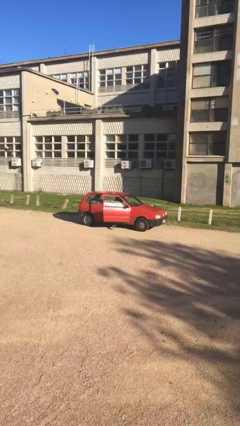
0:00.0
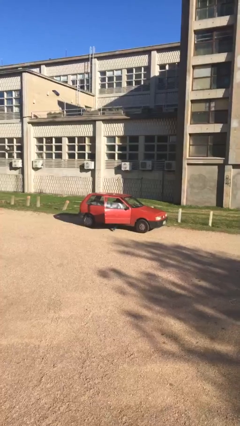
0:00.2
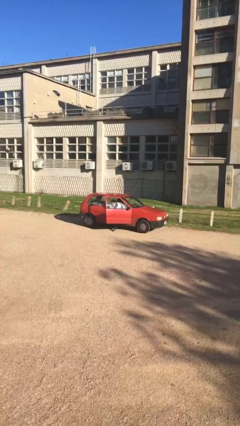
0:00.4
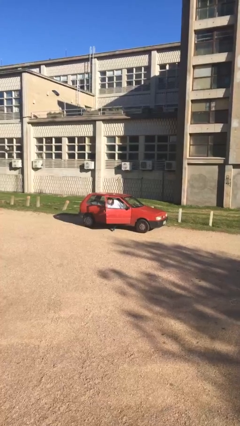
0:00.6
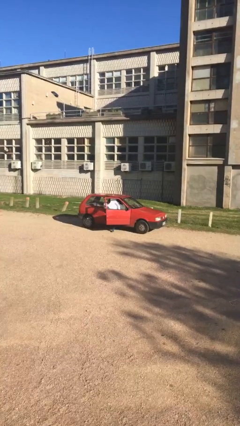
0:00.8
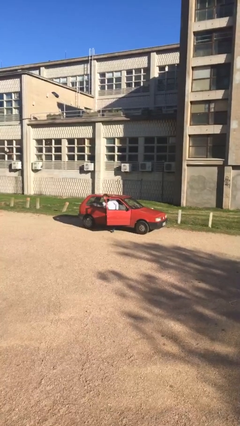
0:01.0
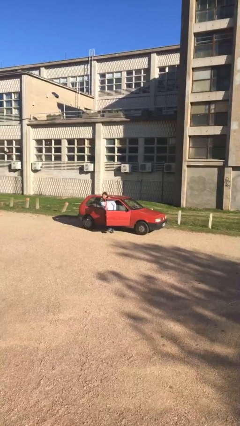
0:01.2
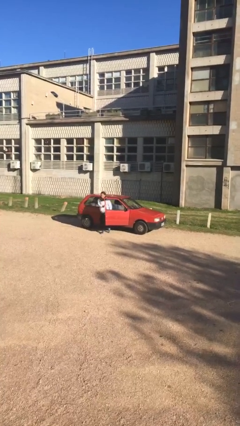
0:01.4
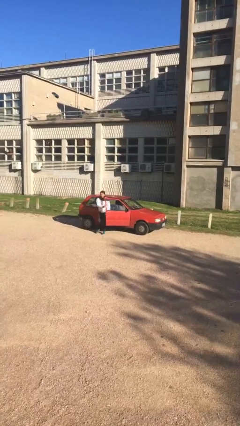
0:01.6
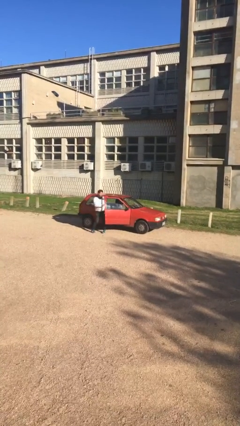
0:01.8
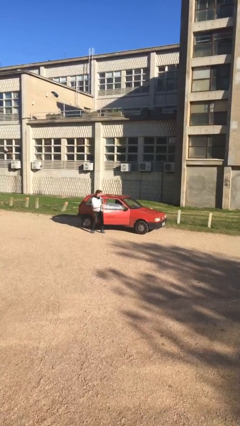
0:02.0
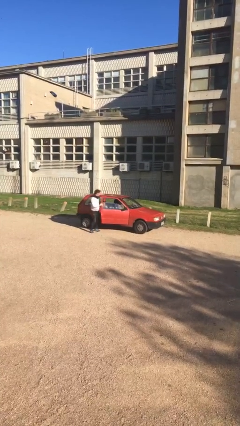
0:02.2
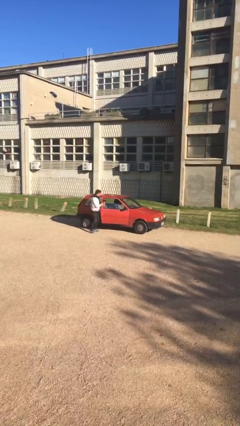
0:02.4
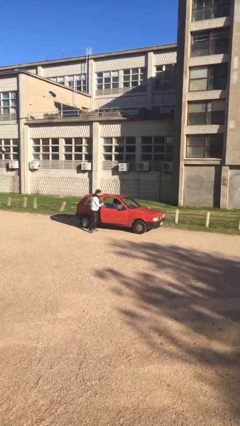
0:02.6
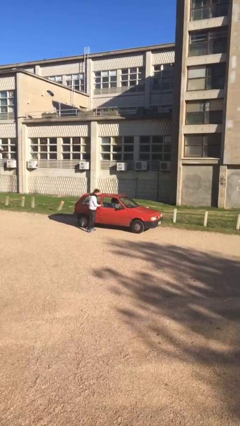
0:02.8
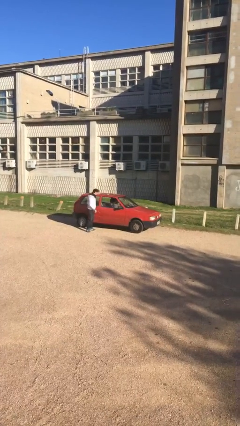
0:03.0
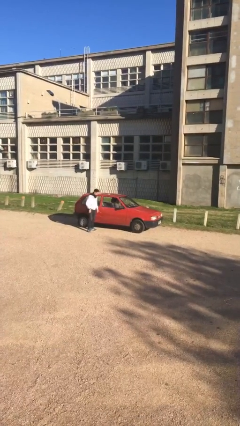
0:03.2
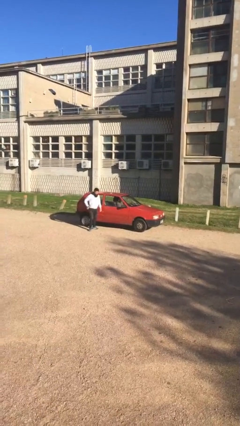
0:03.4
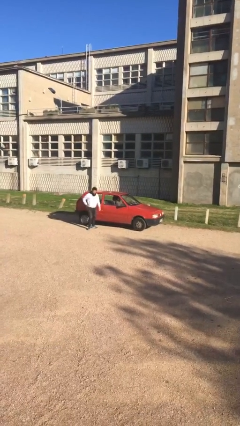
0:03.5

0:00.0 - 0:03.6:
car drops off person

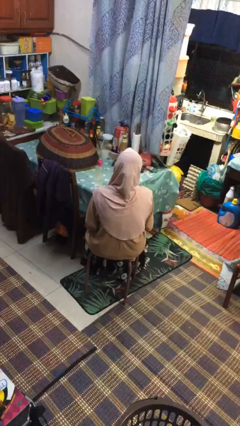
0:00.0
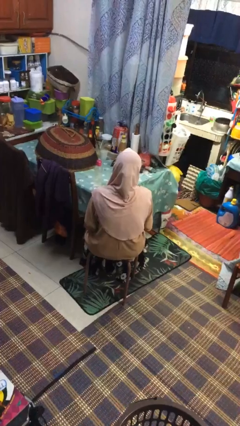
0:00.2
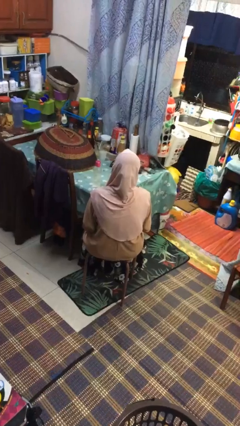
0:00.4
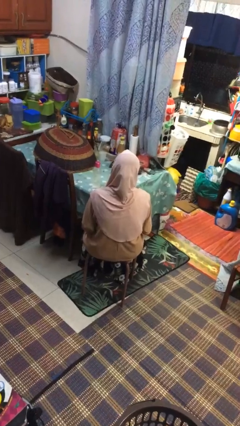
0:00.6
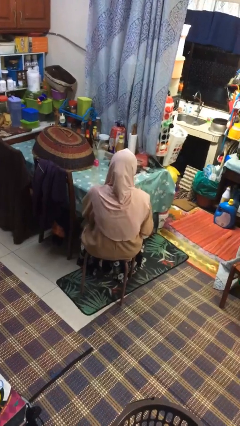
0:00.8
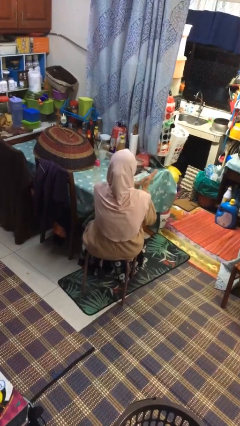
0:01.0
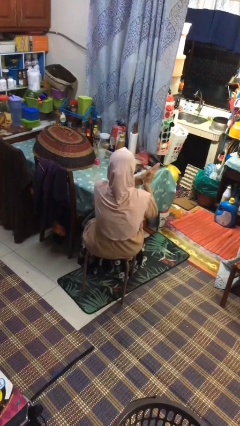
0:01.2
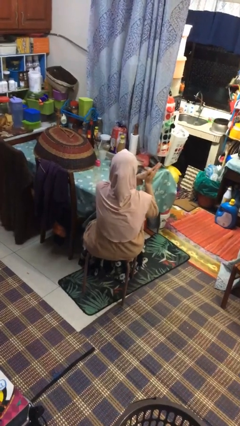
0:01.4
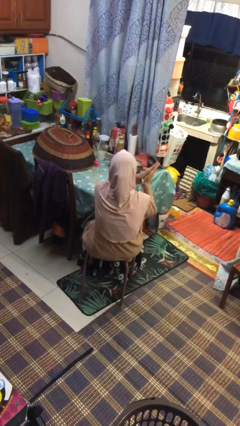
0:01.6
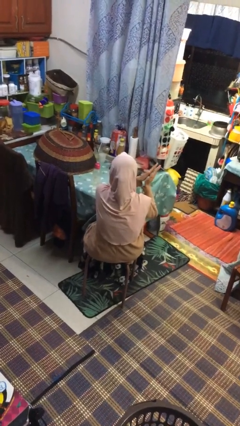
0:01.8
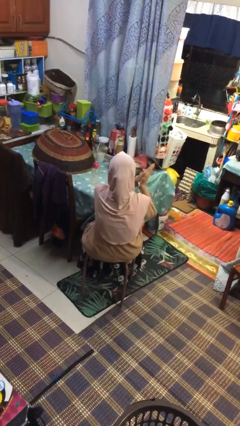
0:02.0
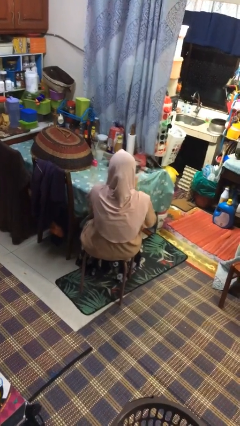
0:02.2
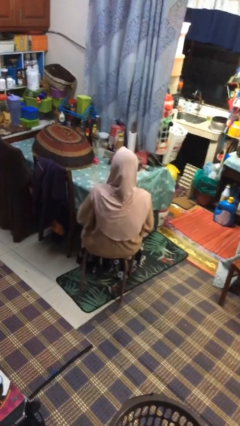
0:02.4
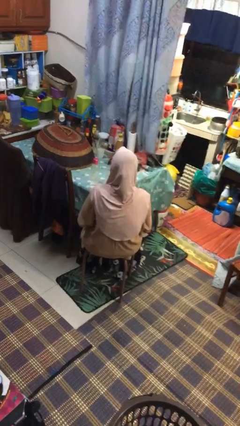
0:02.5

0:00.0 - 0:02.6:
person claps hands

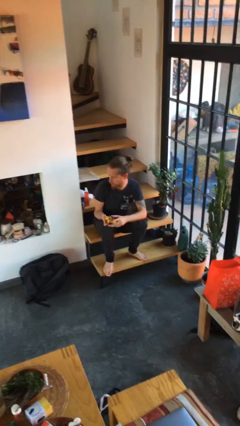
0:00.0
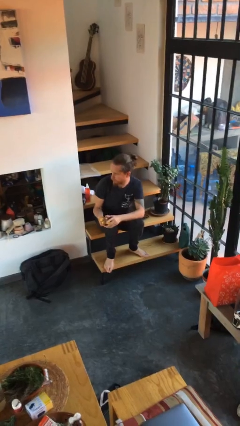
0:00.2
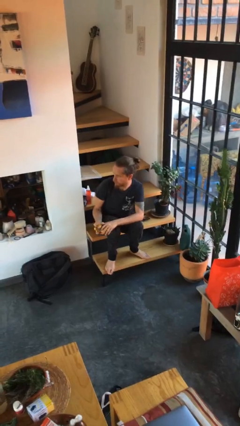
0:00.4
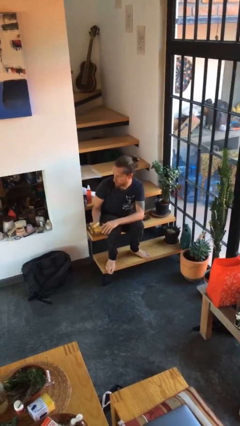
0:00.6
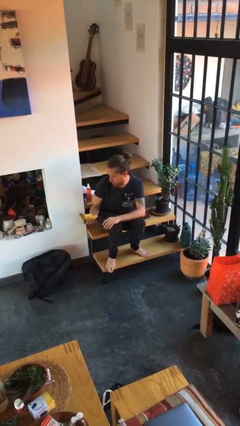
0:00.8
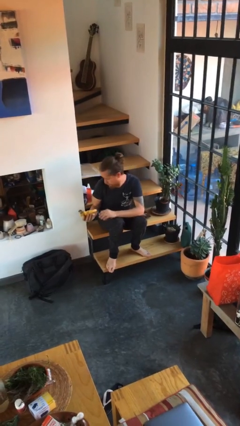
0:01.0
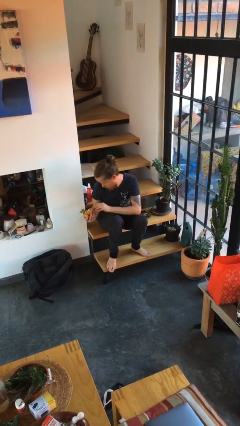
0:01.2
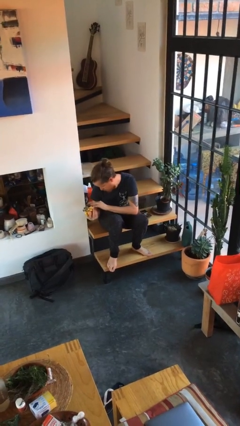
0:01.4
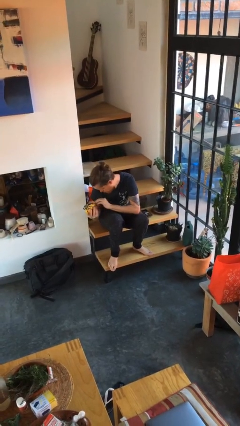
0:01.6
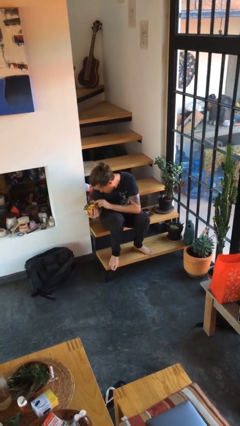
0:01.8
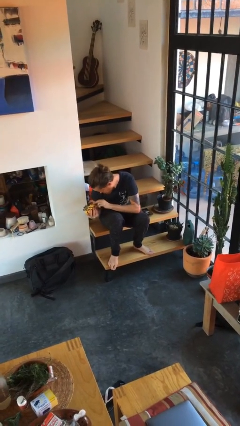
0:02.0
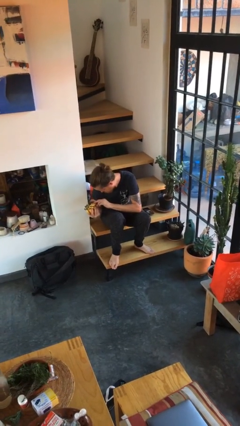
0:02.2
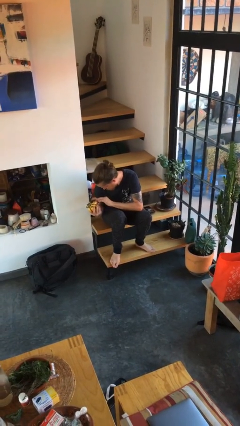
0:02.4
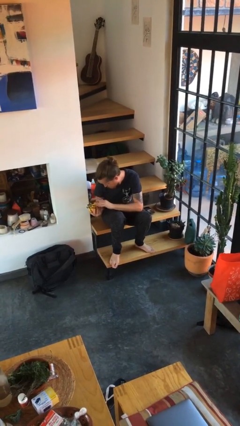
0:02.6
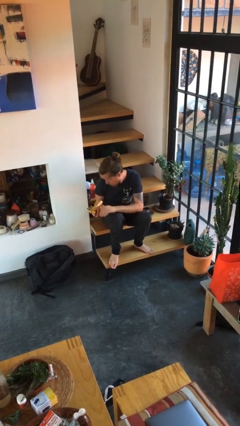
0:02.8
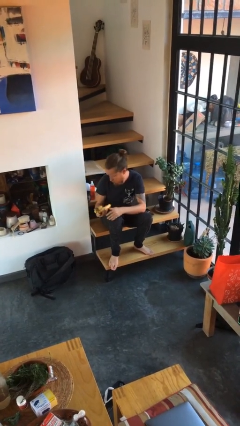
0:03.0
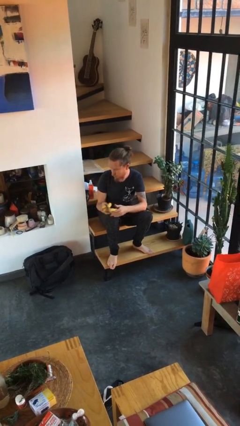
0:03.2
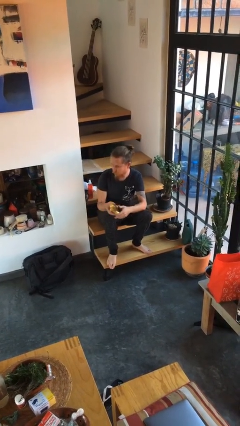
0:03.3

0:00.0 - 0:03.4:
person taps object with finger

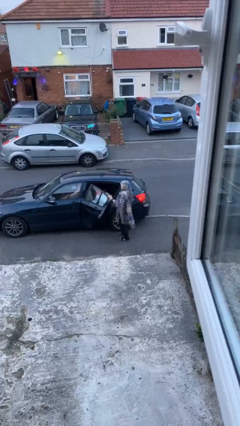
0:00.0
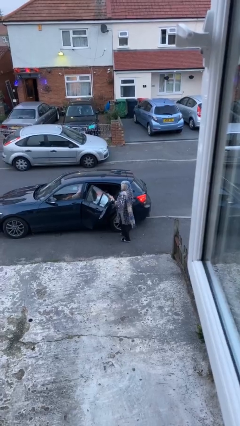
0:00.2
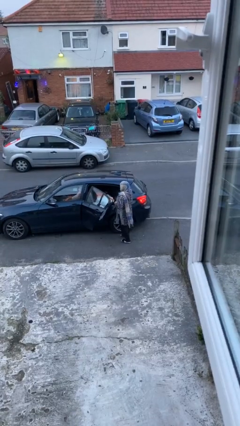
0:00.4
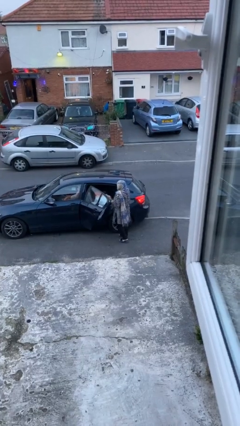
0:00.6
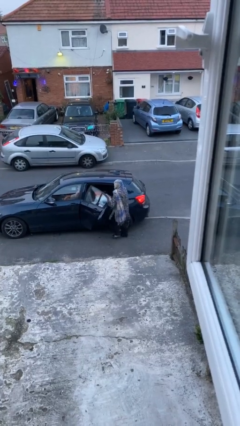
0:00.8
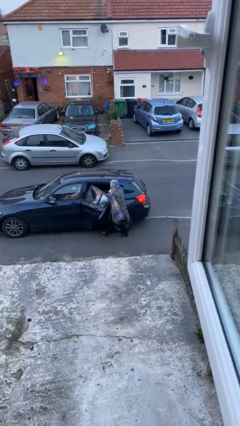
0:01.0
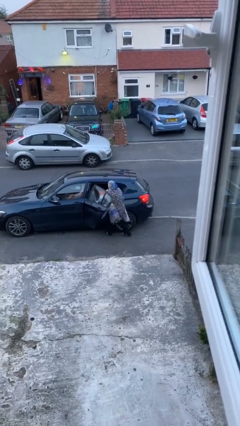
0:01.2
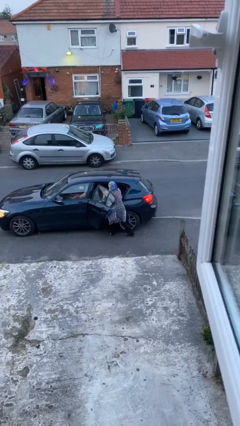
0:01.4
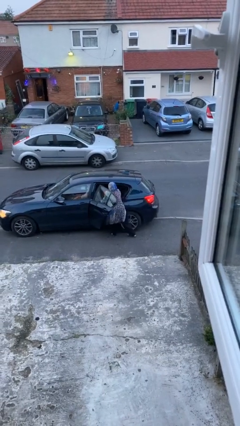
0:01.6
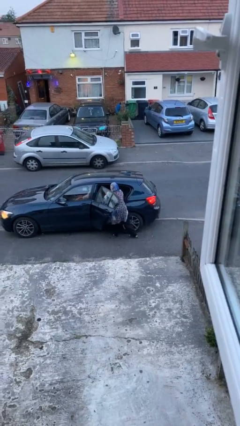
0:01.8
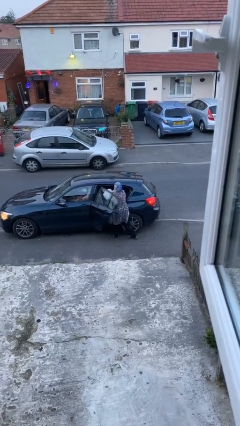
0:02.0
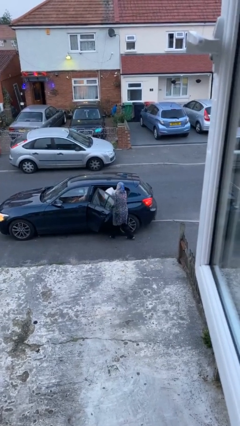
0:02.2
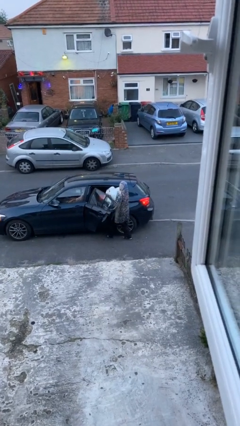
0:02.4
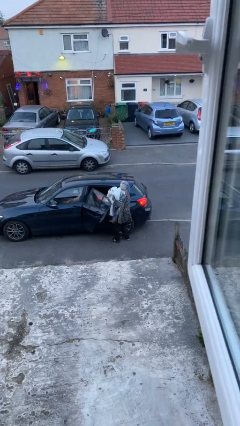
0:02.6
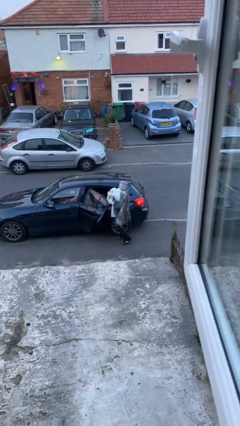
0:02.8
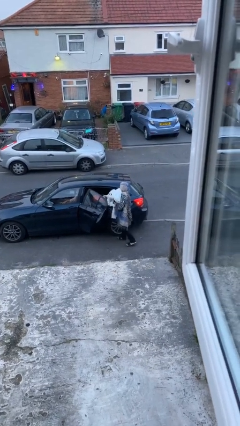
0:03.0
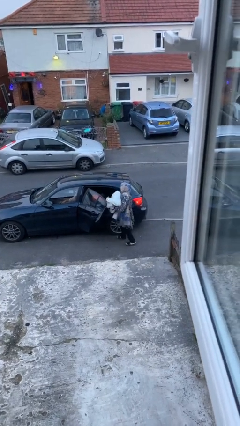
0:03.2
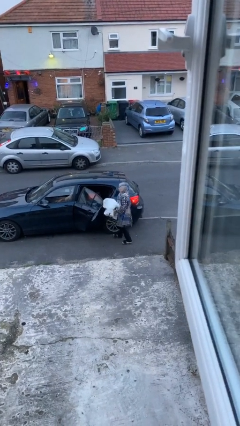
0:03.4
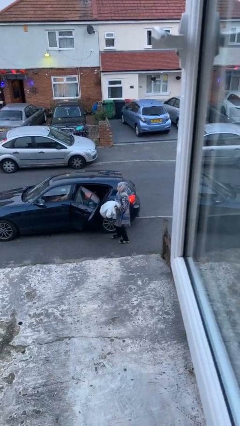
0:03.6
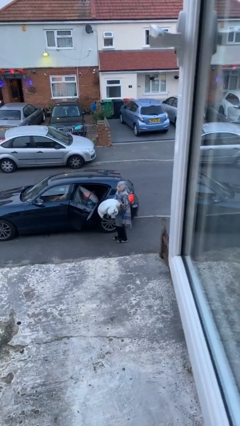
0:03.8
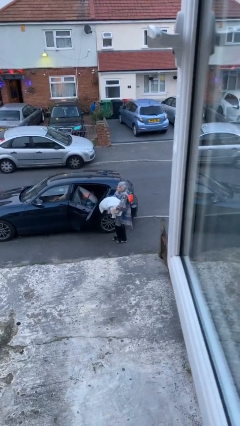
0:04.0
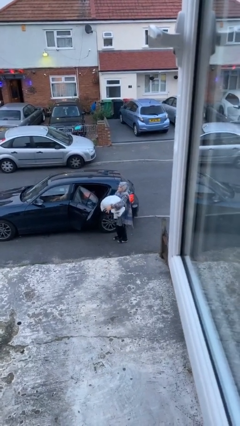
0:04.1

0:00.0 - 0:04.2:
person unloads car

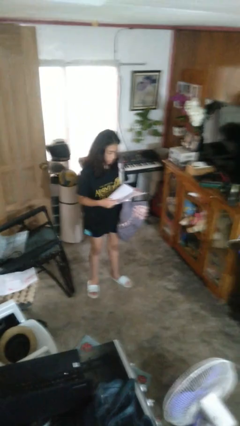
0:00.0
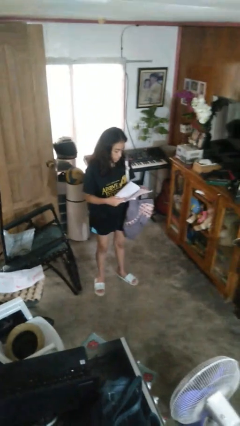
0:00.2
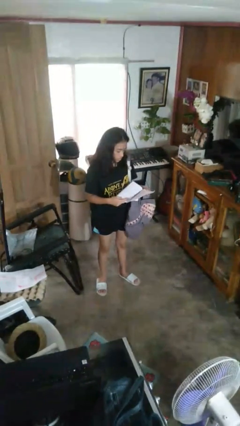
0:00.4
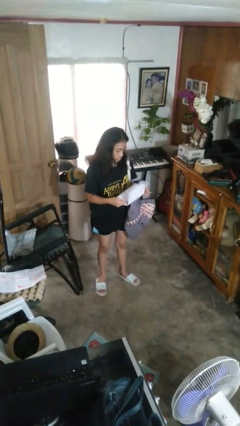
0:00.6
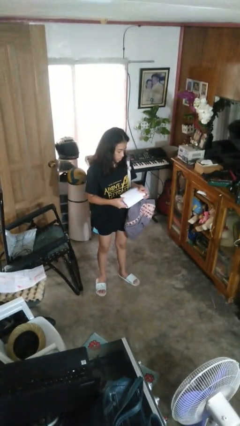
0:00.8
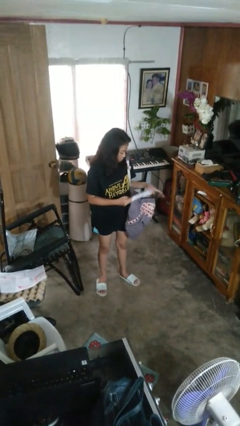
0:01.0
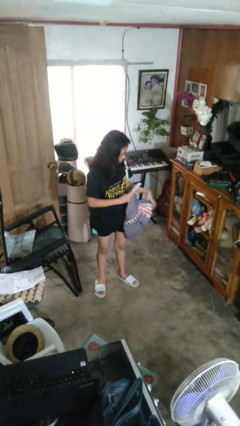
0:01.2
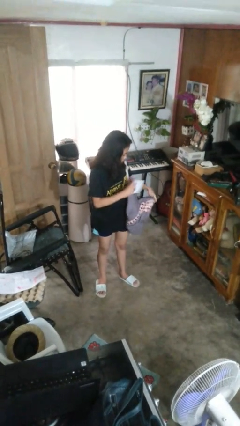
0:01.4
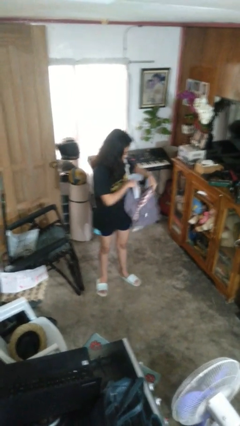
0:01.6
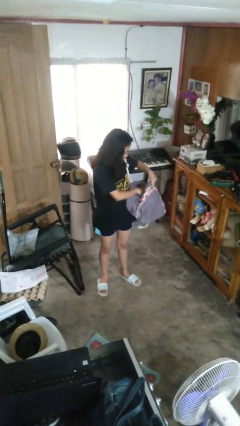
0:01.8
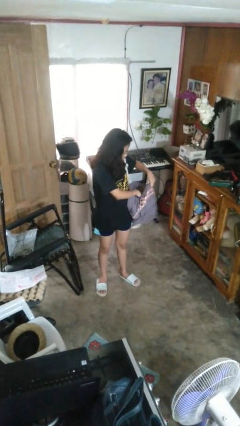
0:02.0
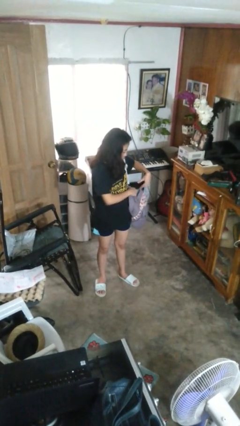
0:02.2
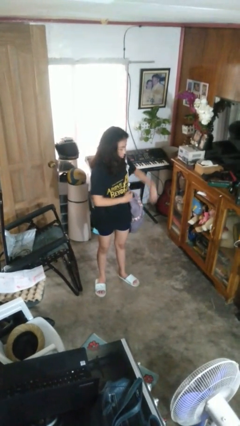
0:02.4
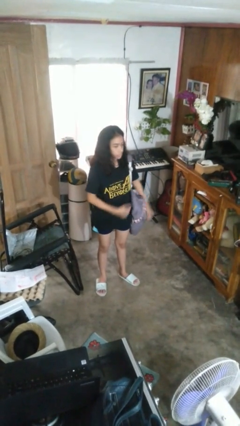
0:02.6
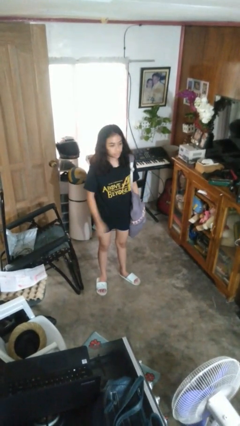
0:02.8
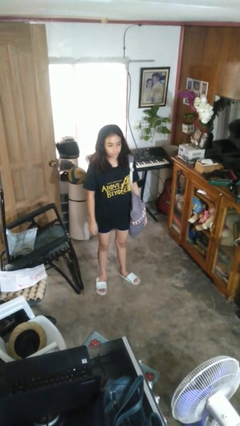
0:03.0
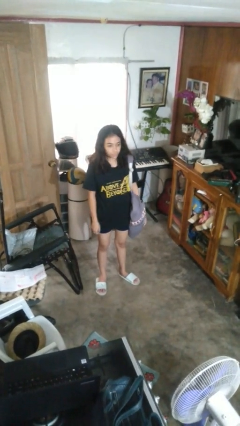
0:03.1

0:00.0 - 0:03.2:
person puts object into backpack

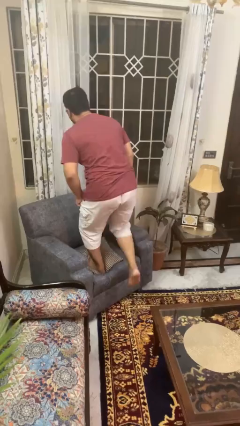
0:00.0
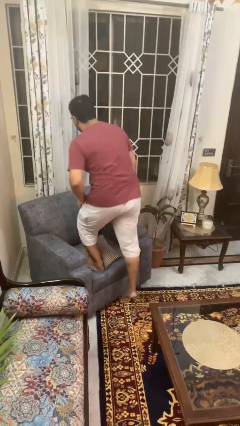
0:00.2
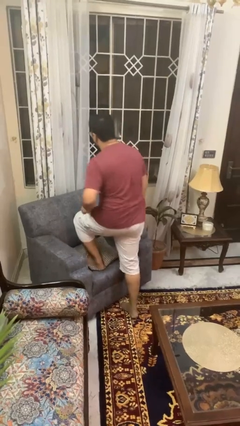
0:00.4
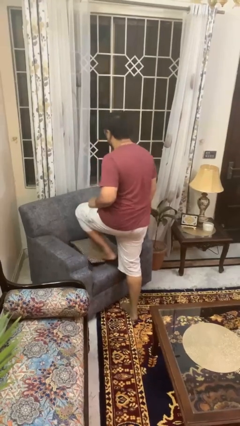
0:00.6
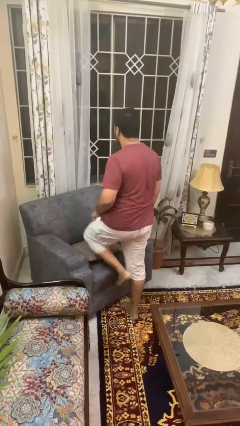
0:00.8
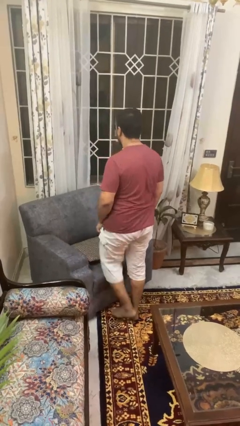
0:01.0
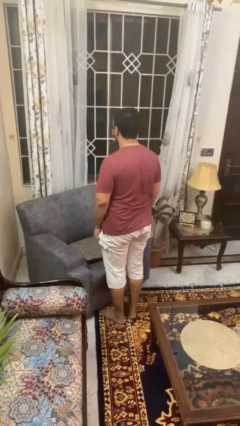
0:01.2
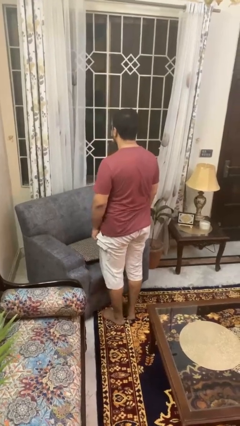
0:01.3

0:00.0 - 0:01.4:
person climbs off couch
